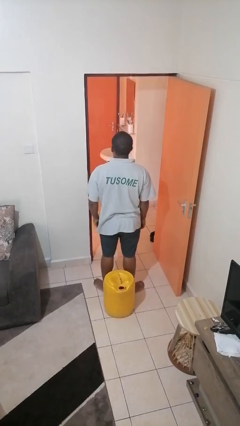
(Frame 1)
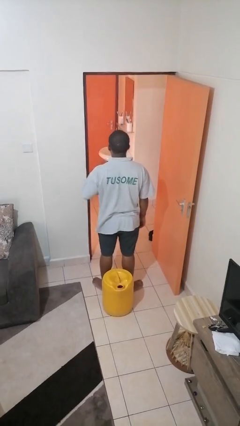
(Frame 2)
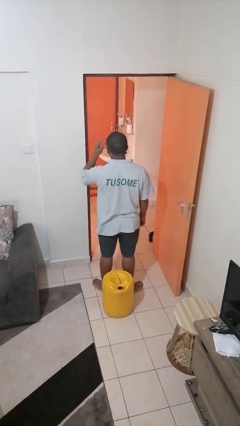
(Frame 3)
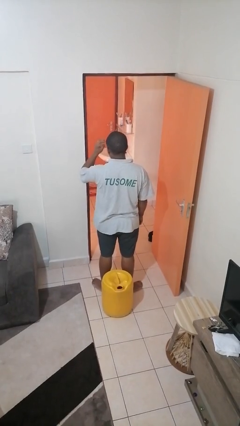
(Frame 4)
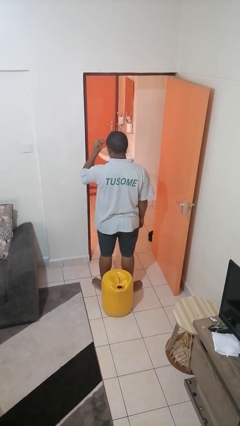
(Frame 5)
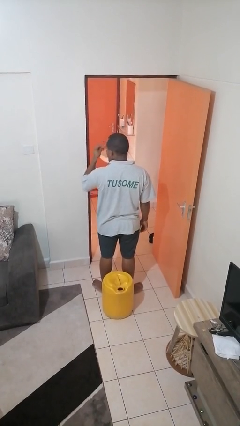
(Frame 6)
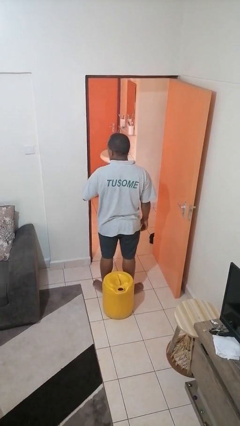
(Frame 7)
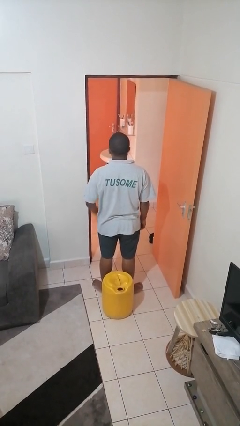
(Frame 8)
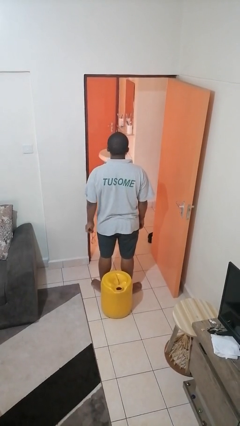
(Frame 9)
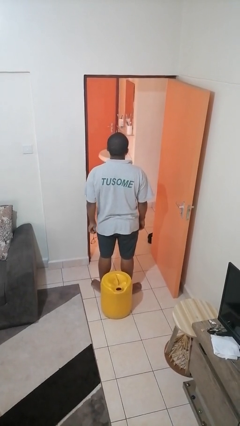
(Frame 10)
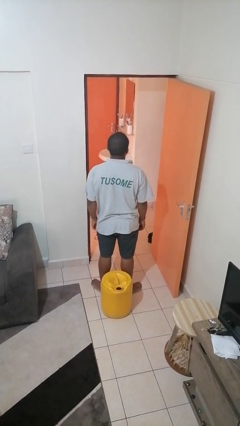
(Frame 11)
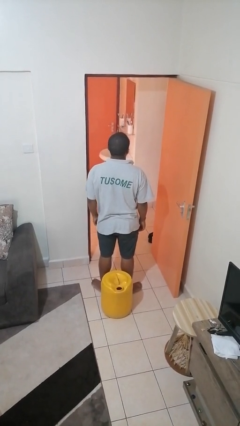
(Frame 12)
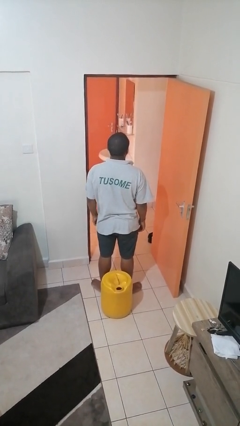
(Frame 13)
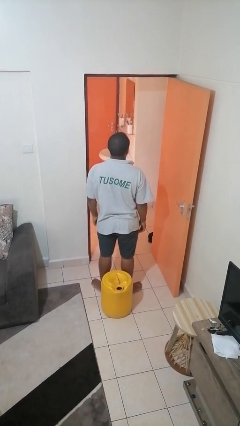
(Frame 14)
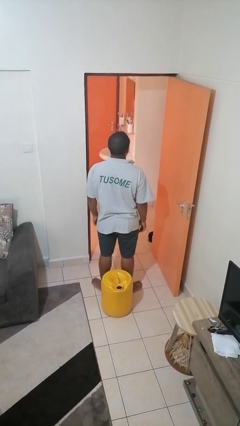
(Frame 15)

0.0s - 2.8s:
person takes off glasses

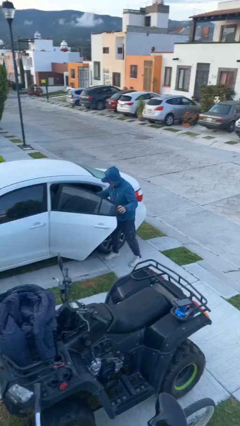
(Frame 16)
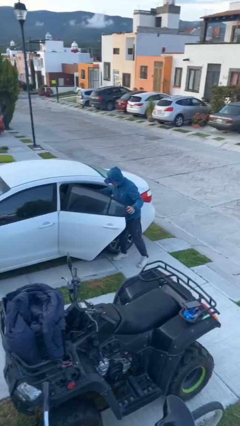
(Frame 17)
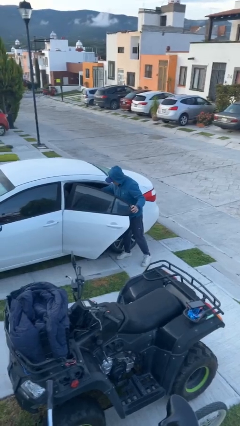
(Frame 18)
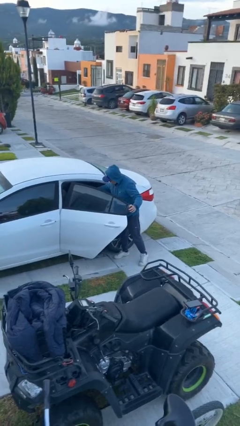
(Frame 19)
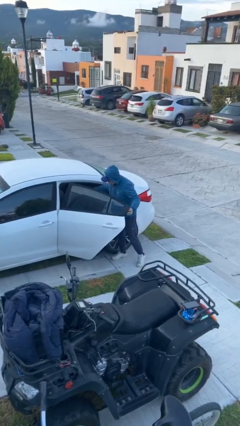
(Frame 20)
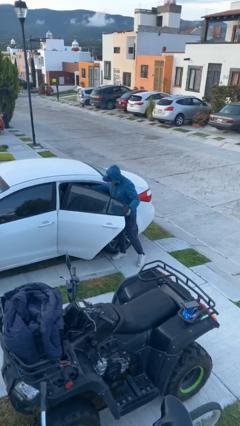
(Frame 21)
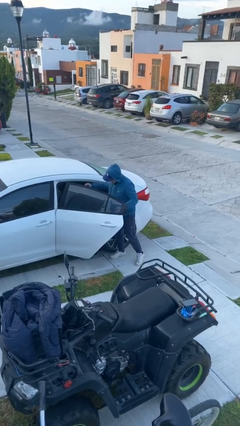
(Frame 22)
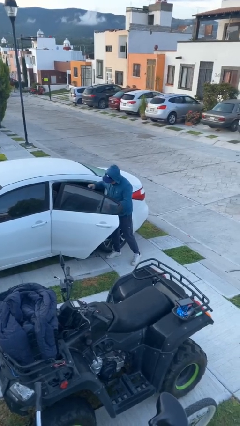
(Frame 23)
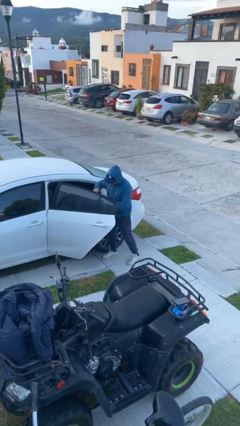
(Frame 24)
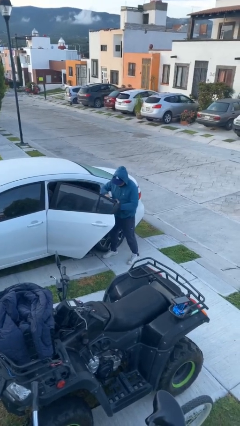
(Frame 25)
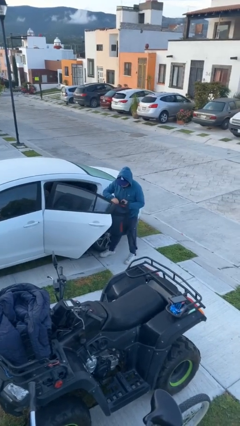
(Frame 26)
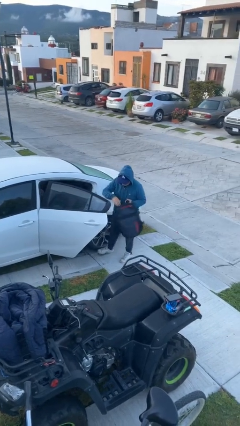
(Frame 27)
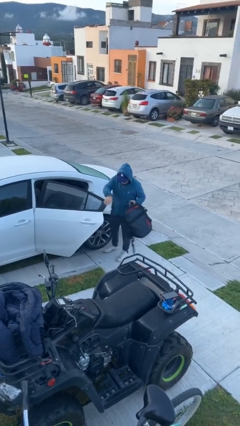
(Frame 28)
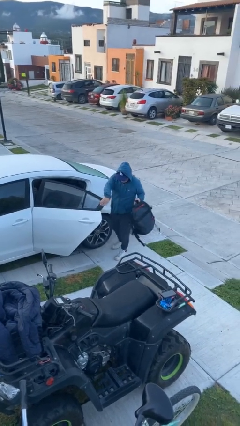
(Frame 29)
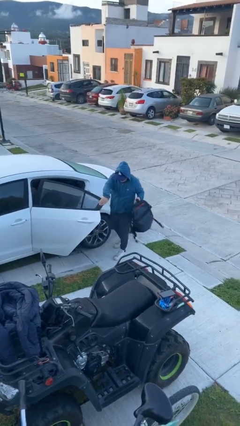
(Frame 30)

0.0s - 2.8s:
person unloads car

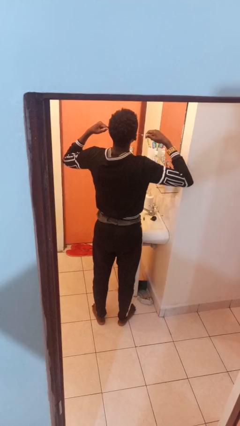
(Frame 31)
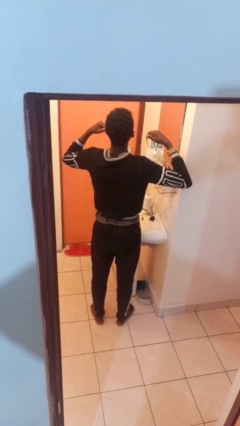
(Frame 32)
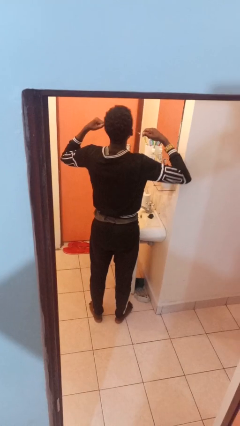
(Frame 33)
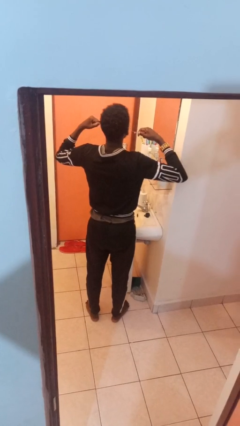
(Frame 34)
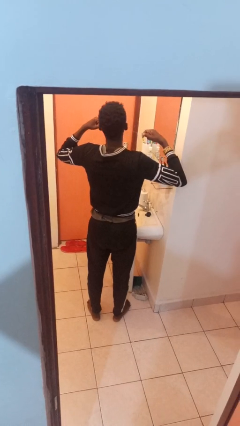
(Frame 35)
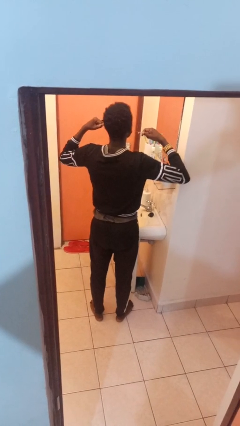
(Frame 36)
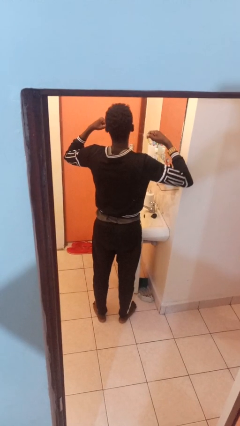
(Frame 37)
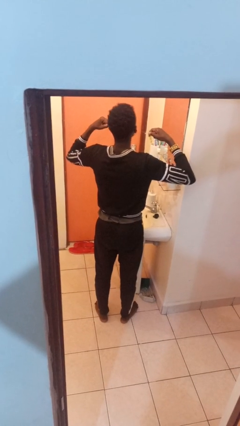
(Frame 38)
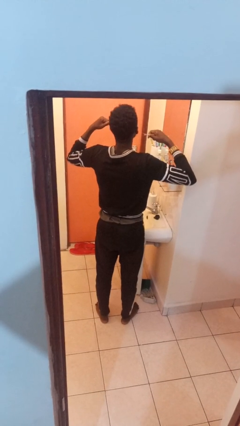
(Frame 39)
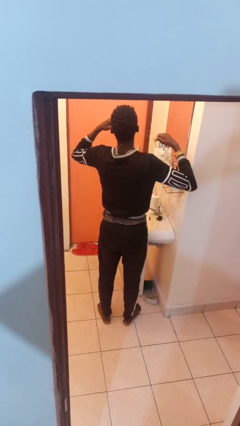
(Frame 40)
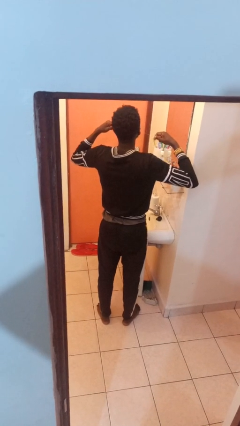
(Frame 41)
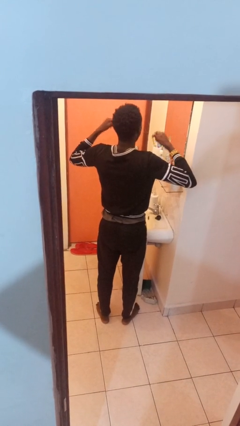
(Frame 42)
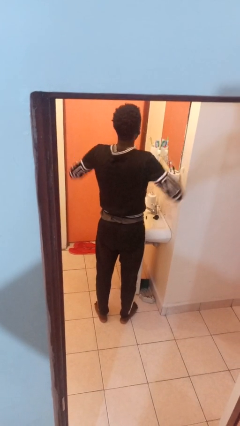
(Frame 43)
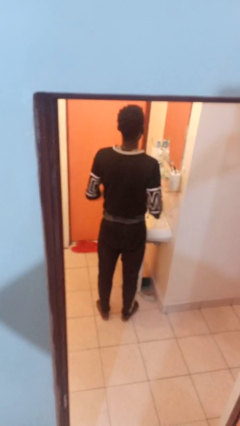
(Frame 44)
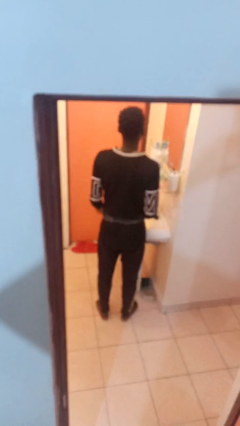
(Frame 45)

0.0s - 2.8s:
person flosses

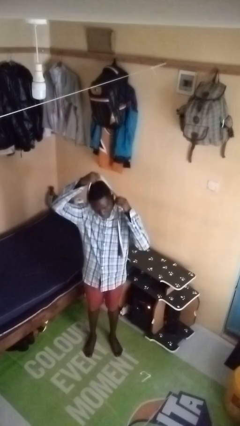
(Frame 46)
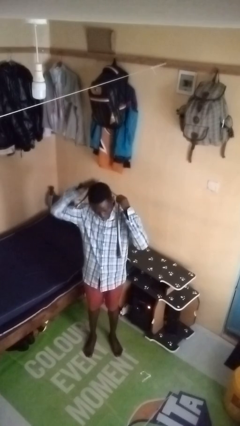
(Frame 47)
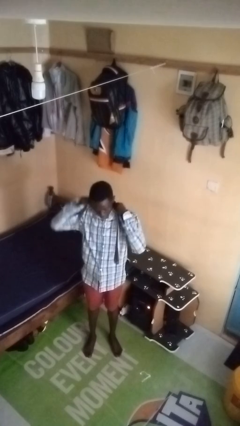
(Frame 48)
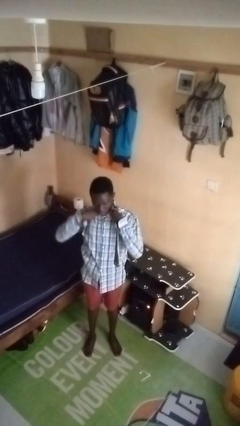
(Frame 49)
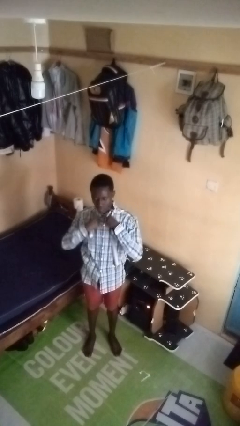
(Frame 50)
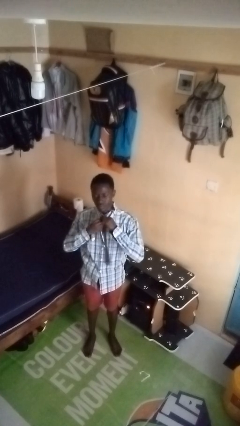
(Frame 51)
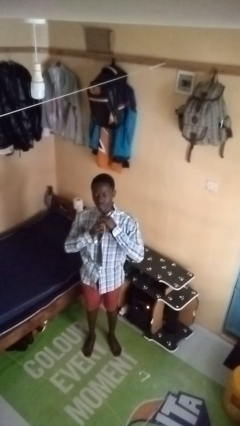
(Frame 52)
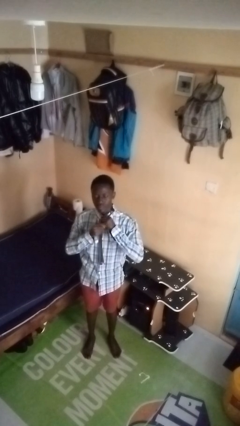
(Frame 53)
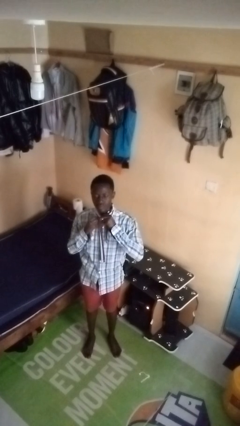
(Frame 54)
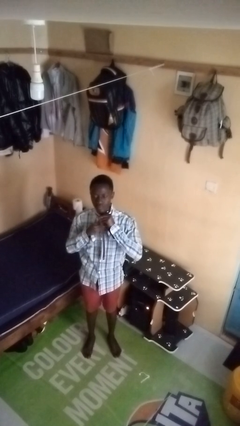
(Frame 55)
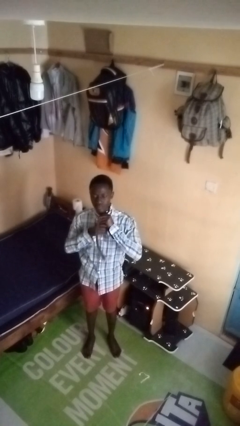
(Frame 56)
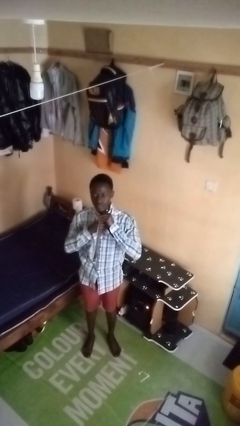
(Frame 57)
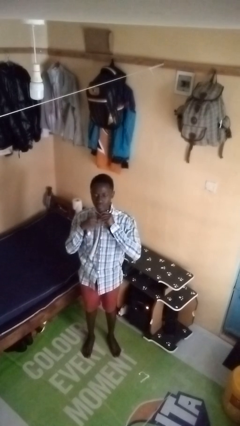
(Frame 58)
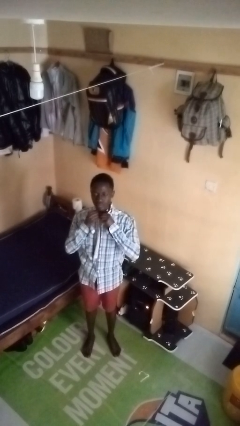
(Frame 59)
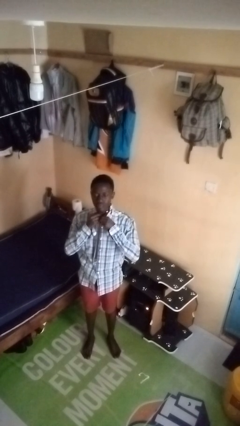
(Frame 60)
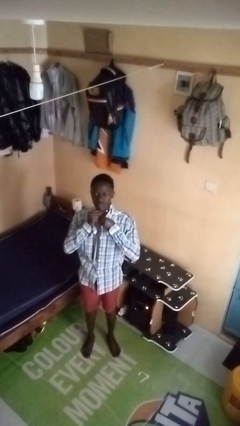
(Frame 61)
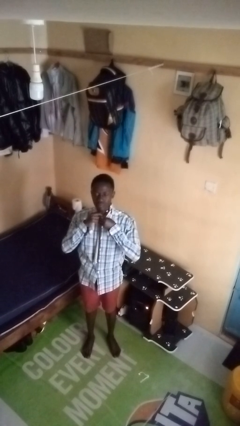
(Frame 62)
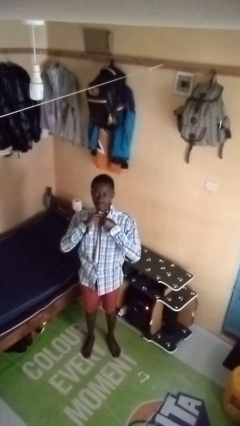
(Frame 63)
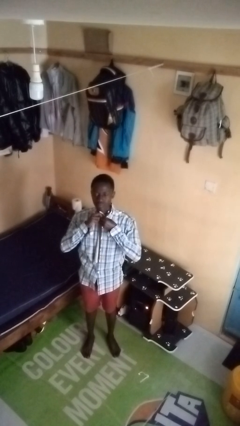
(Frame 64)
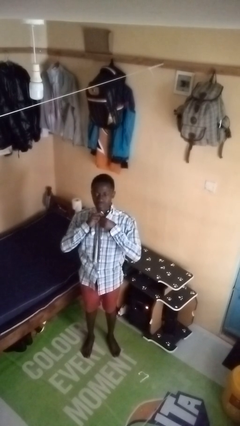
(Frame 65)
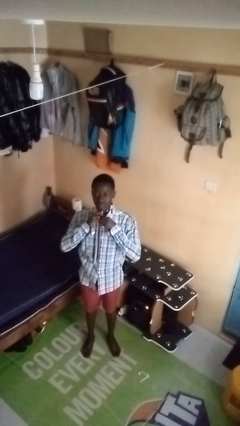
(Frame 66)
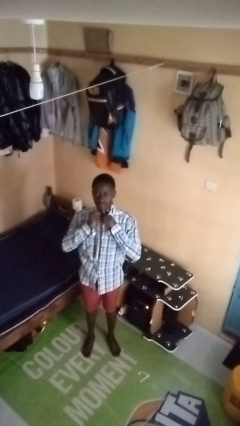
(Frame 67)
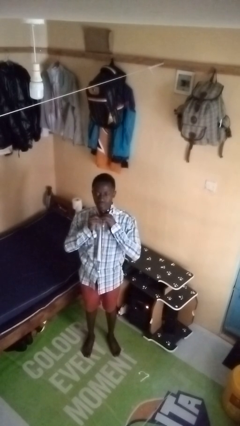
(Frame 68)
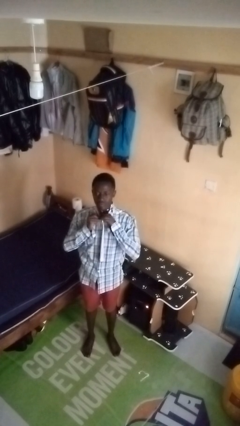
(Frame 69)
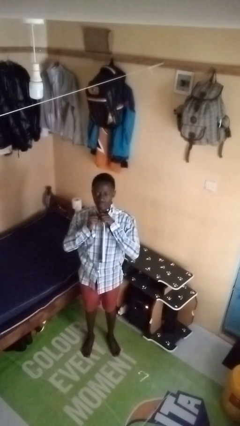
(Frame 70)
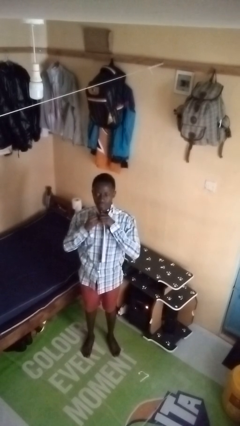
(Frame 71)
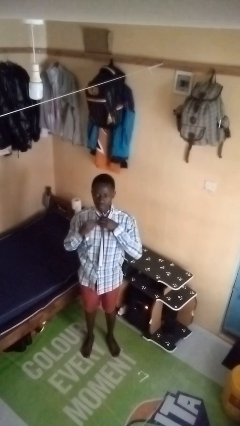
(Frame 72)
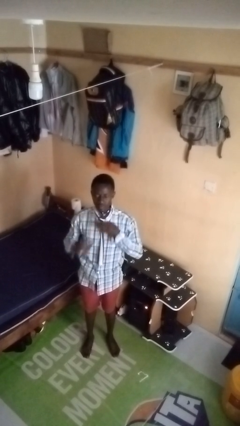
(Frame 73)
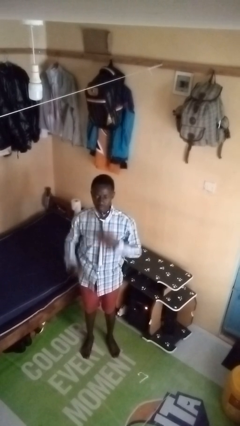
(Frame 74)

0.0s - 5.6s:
person puts on necktie

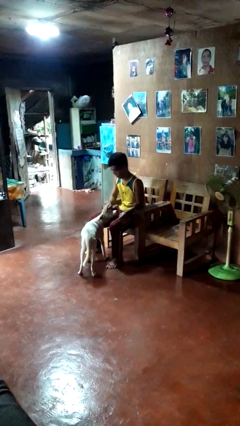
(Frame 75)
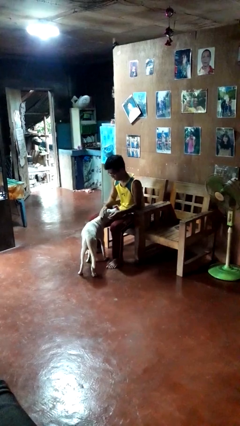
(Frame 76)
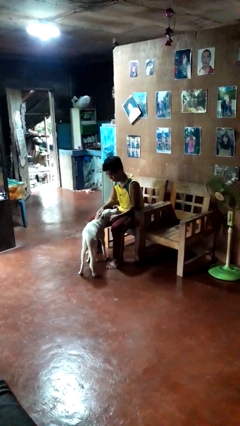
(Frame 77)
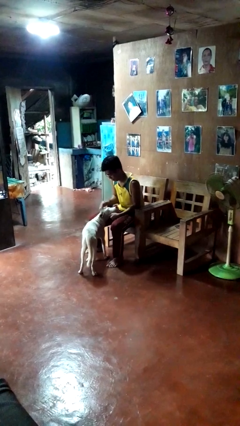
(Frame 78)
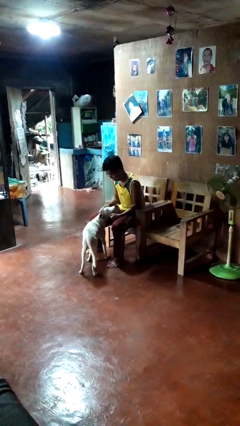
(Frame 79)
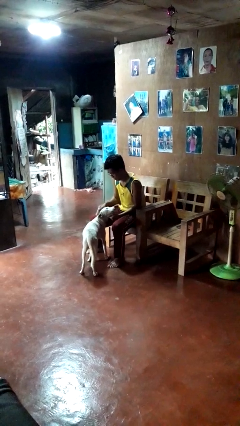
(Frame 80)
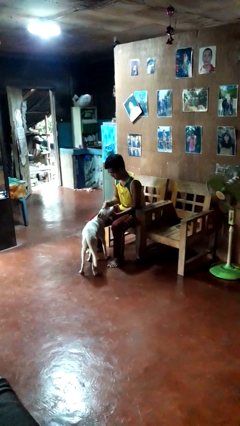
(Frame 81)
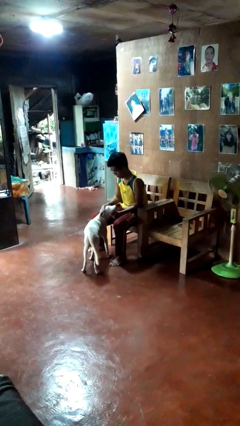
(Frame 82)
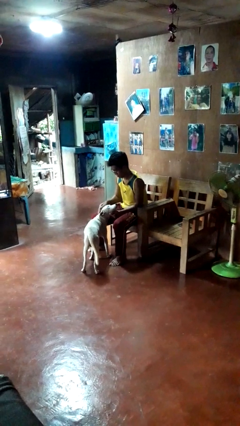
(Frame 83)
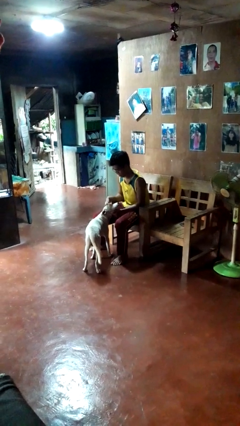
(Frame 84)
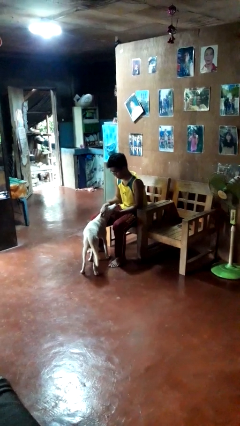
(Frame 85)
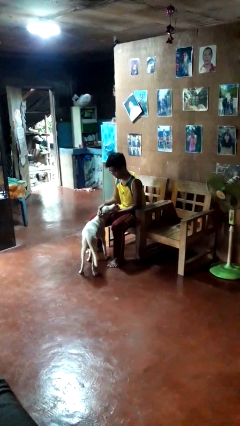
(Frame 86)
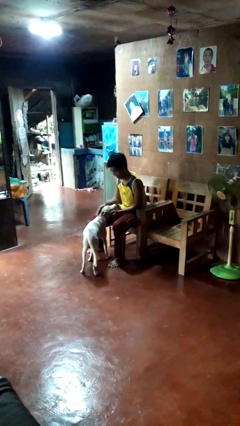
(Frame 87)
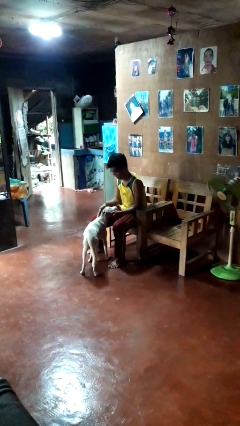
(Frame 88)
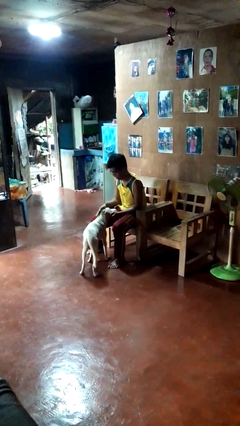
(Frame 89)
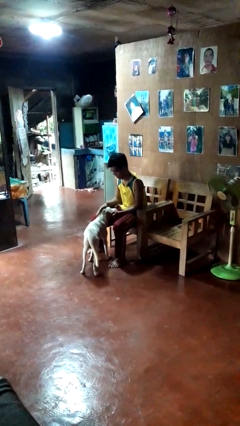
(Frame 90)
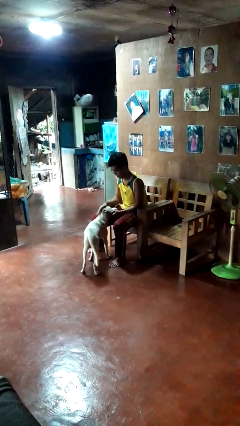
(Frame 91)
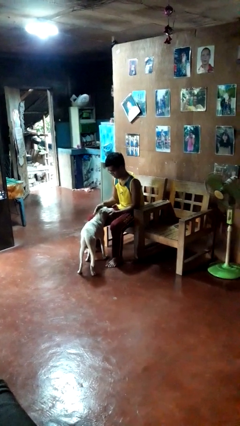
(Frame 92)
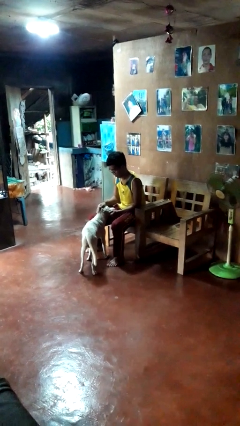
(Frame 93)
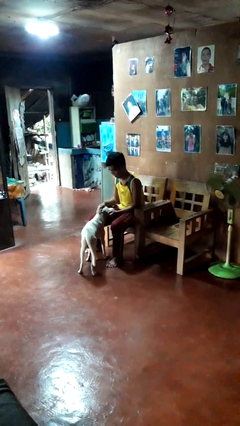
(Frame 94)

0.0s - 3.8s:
person pets dog

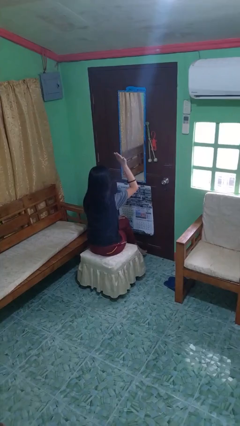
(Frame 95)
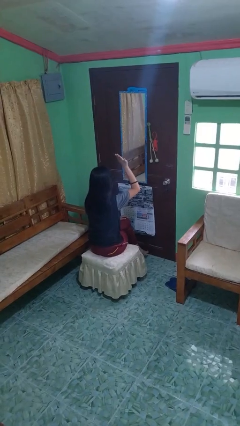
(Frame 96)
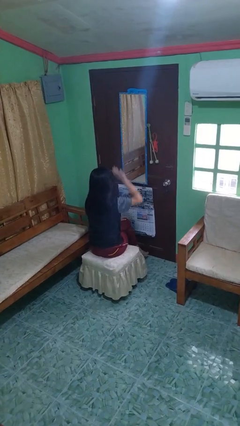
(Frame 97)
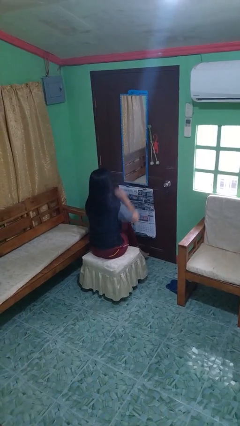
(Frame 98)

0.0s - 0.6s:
person gestures lower hand
